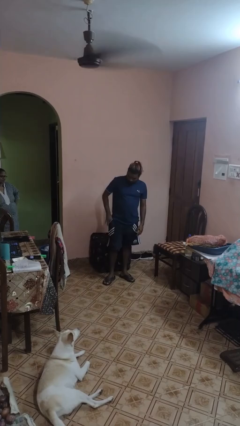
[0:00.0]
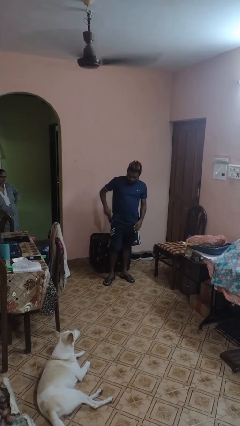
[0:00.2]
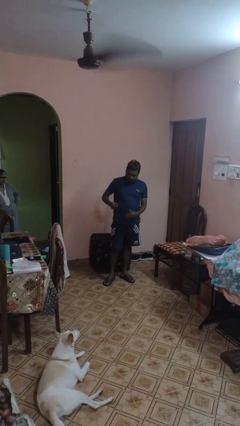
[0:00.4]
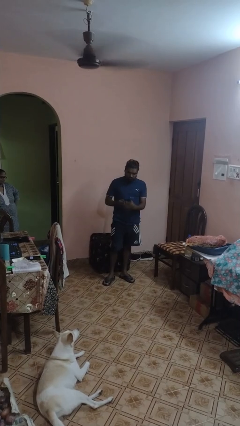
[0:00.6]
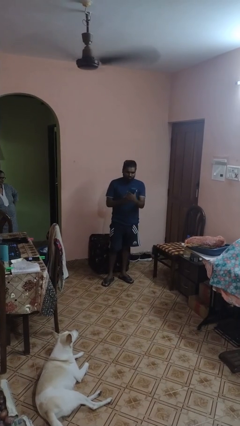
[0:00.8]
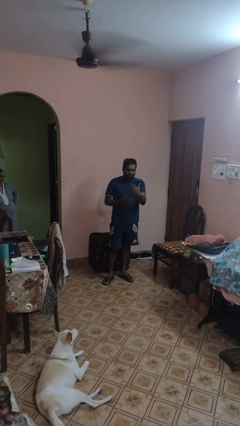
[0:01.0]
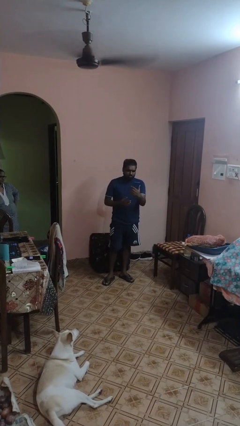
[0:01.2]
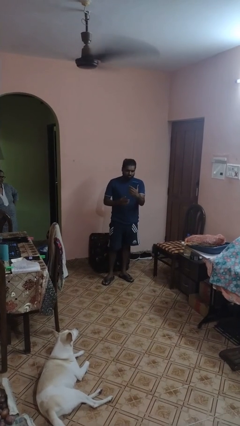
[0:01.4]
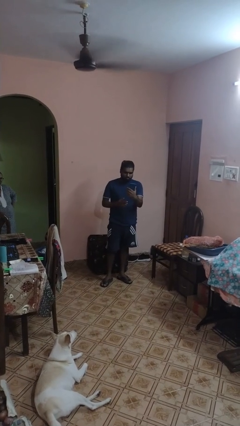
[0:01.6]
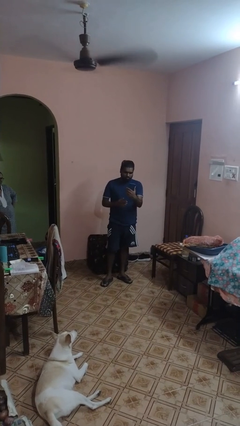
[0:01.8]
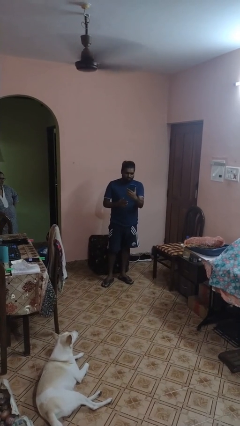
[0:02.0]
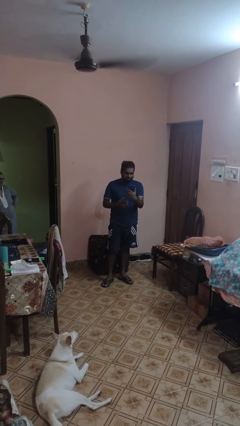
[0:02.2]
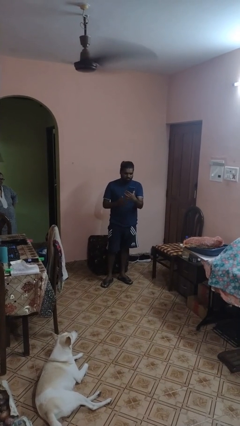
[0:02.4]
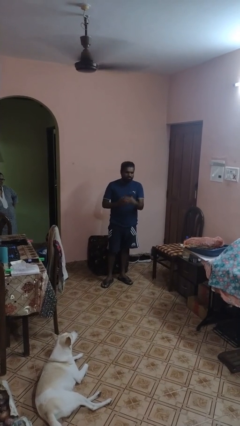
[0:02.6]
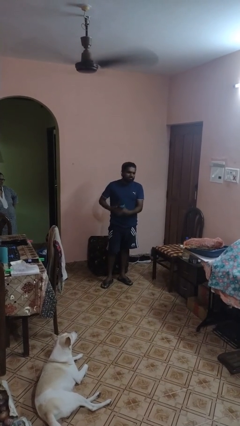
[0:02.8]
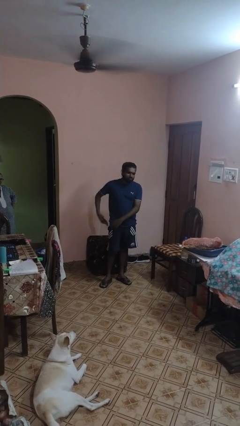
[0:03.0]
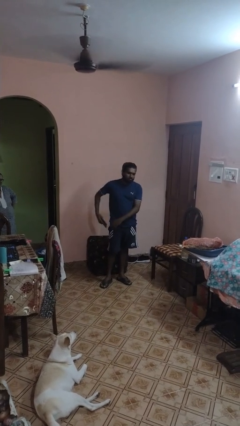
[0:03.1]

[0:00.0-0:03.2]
person takes phone from pocket

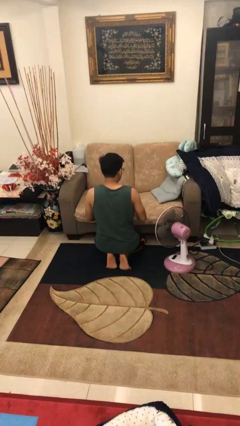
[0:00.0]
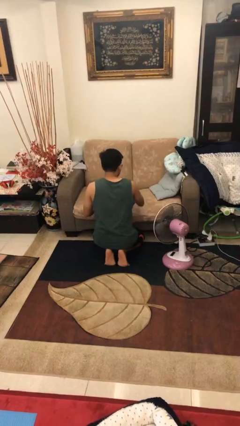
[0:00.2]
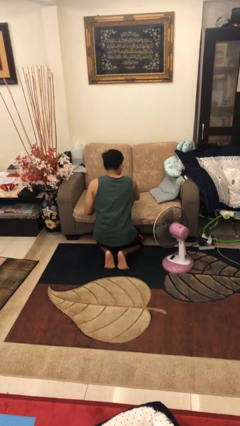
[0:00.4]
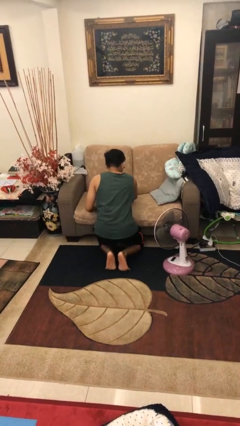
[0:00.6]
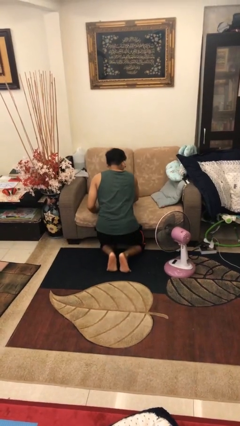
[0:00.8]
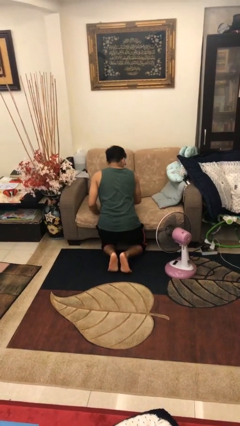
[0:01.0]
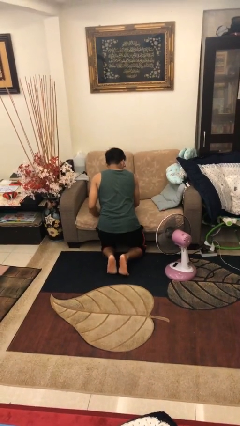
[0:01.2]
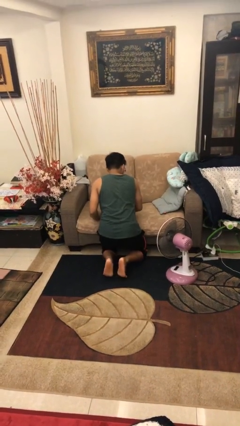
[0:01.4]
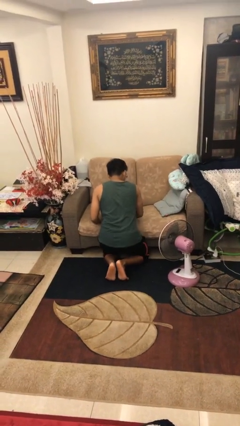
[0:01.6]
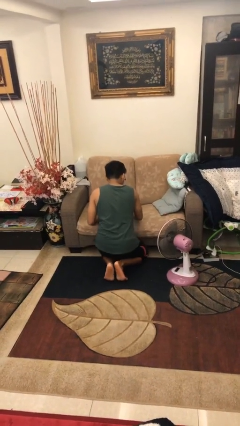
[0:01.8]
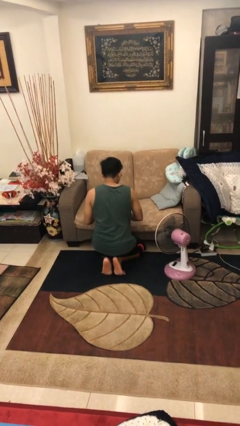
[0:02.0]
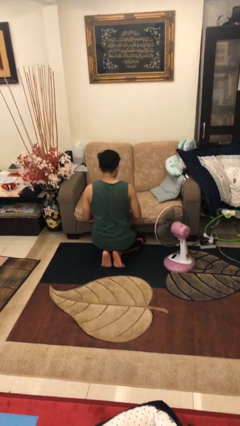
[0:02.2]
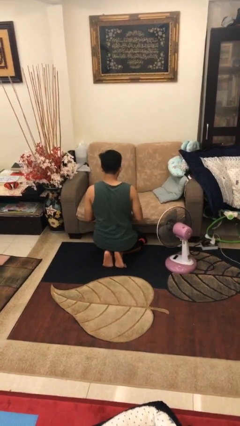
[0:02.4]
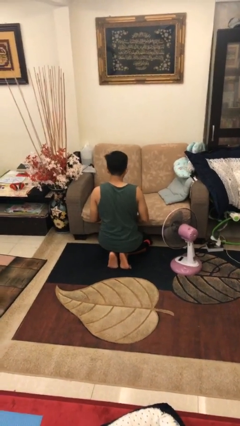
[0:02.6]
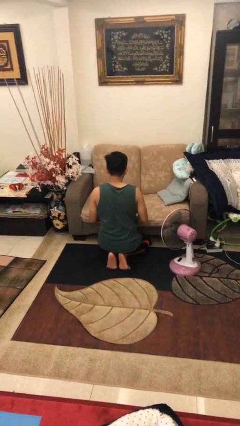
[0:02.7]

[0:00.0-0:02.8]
person searches in couch

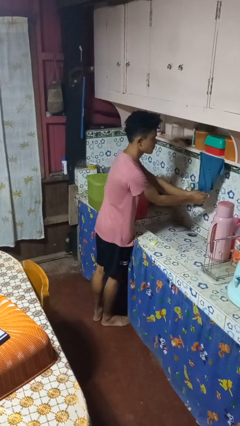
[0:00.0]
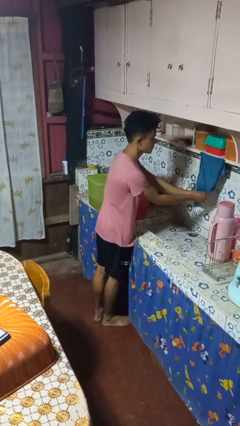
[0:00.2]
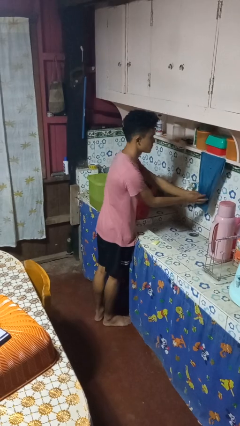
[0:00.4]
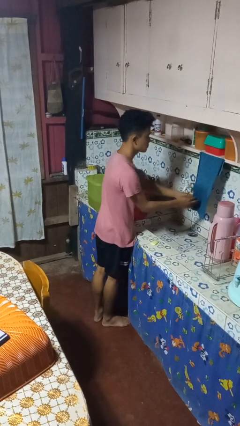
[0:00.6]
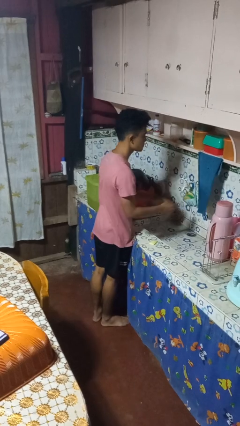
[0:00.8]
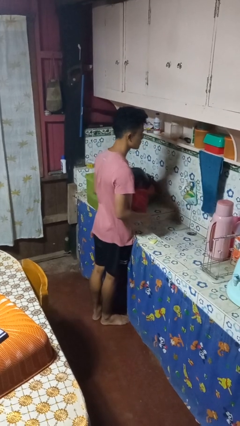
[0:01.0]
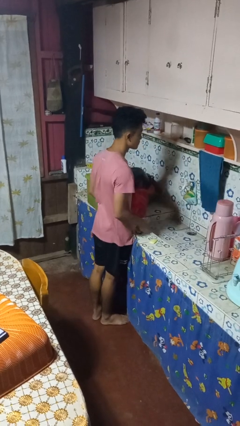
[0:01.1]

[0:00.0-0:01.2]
person dries hands with towel

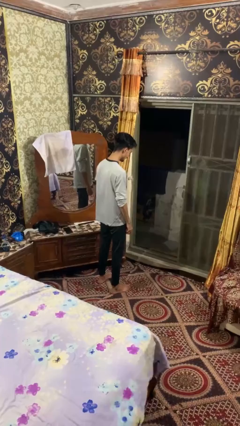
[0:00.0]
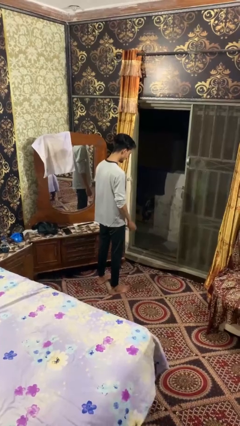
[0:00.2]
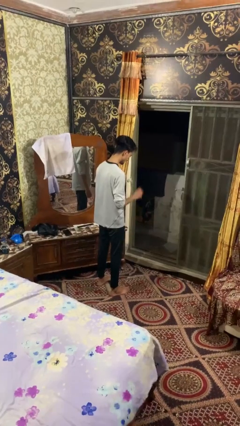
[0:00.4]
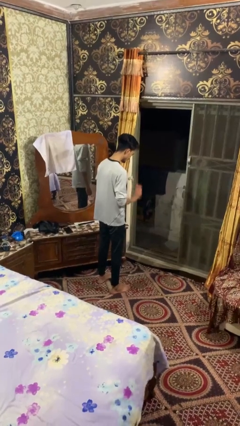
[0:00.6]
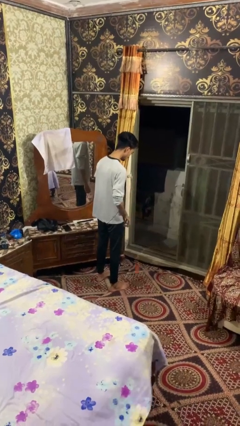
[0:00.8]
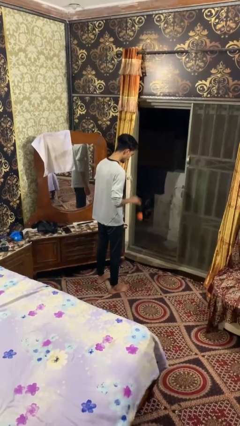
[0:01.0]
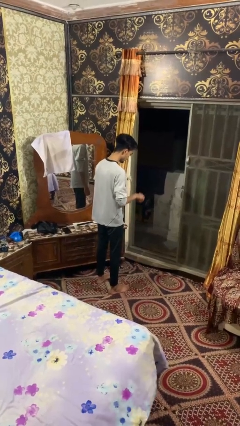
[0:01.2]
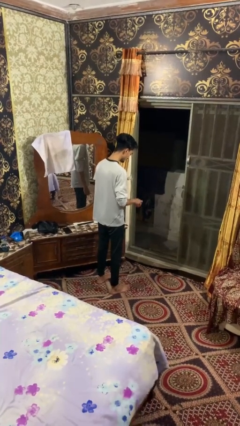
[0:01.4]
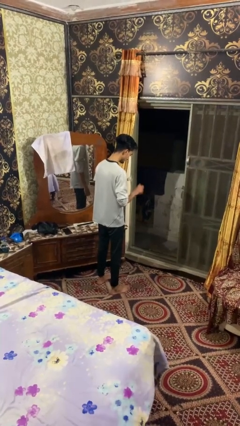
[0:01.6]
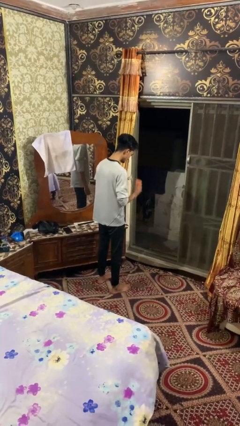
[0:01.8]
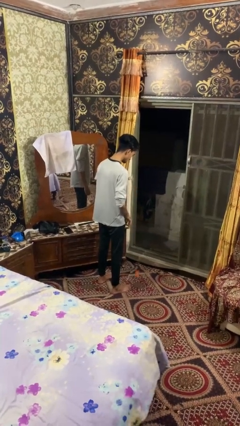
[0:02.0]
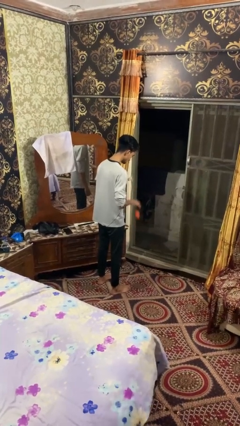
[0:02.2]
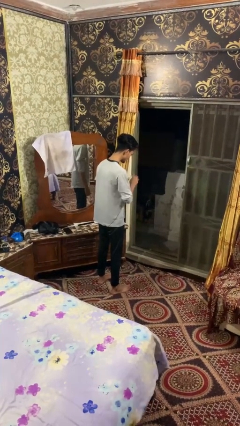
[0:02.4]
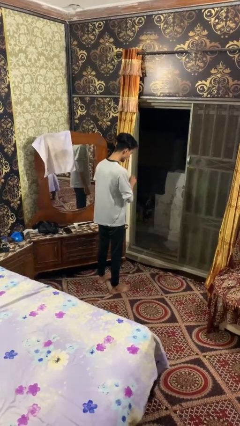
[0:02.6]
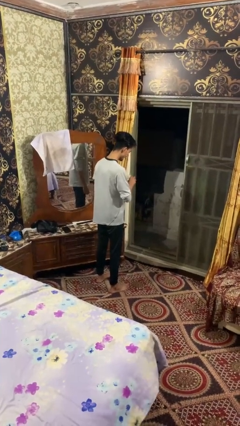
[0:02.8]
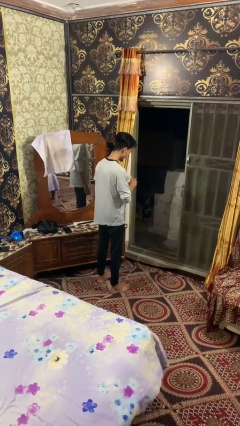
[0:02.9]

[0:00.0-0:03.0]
person bounces ball on floor

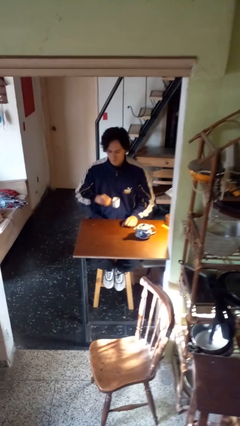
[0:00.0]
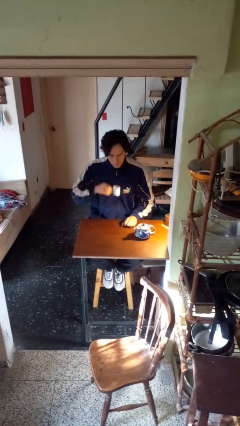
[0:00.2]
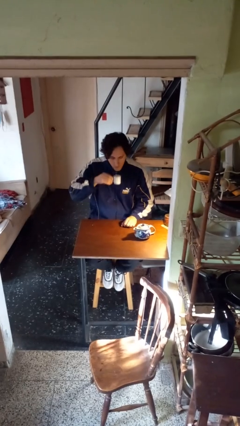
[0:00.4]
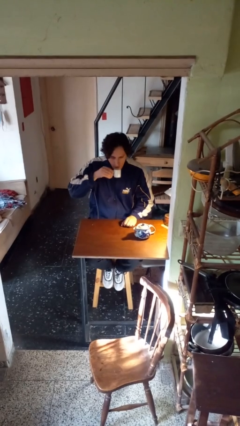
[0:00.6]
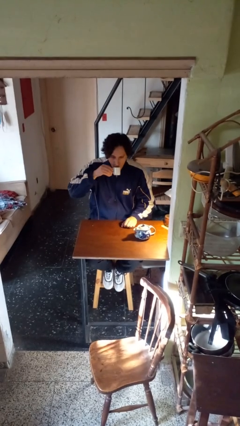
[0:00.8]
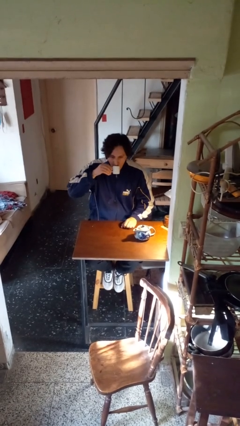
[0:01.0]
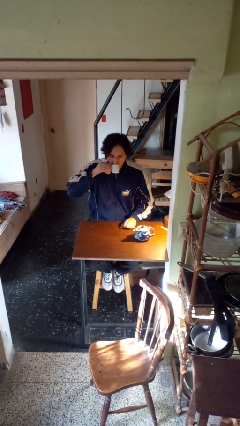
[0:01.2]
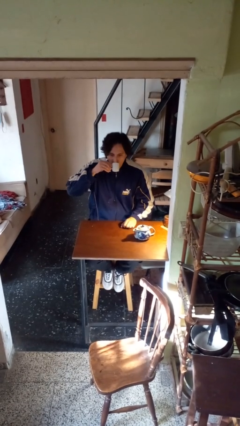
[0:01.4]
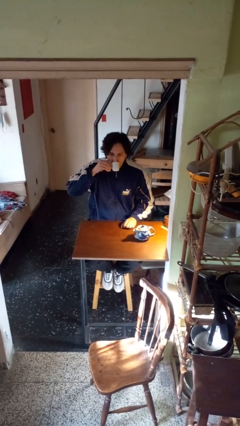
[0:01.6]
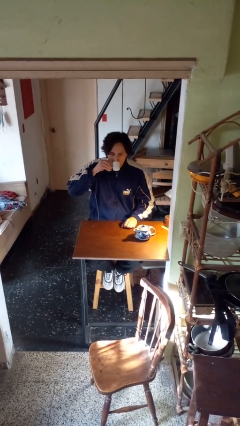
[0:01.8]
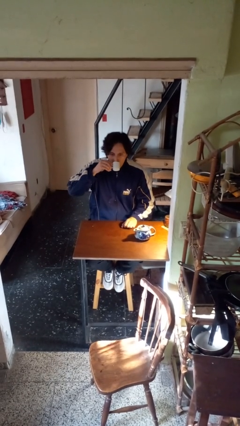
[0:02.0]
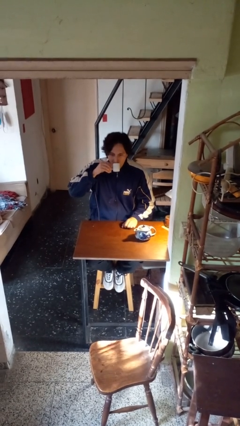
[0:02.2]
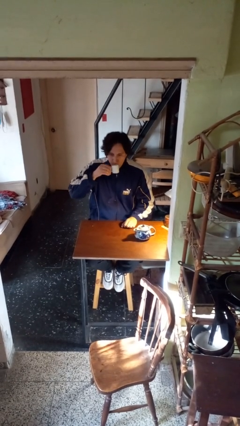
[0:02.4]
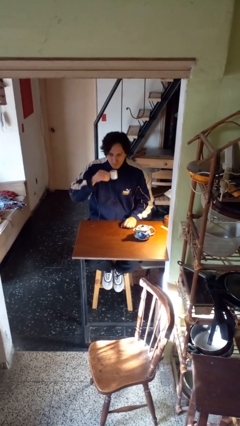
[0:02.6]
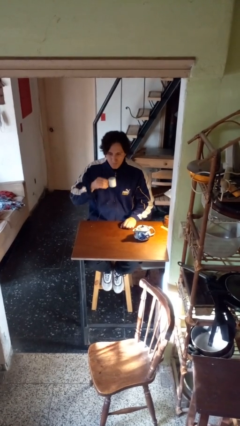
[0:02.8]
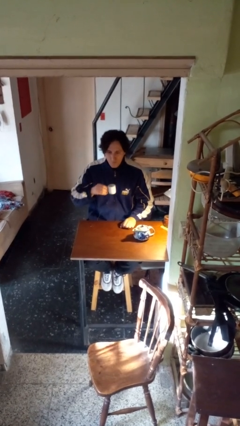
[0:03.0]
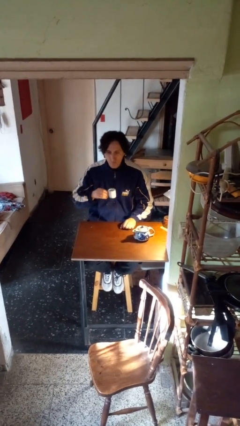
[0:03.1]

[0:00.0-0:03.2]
person drinks from mug

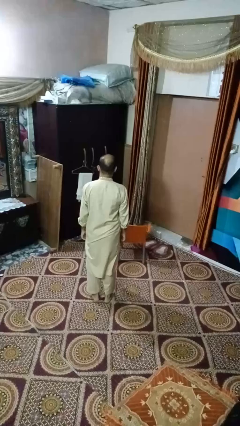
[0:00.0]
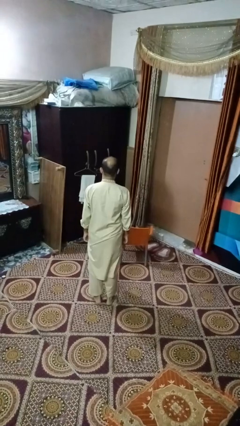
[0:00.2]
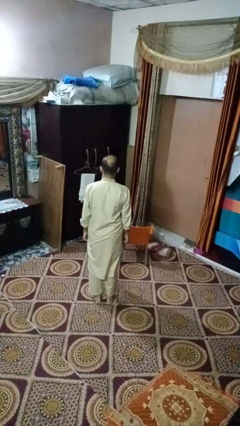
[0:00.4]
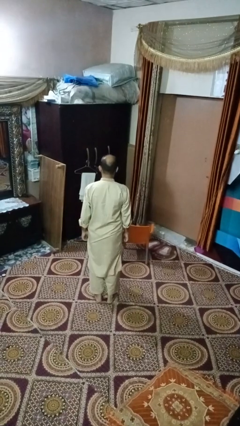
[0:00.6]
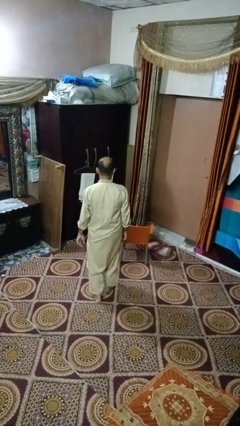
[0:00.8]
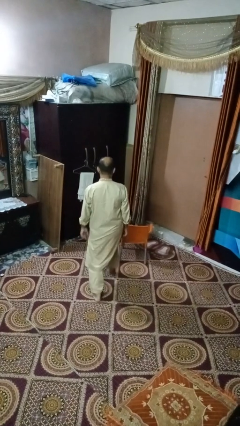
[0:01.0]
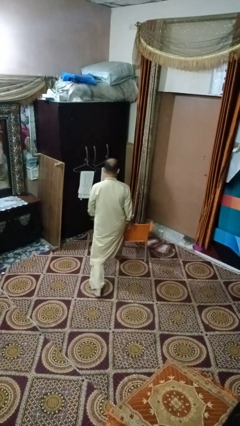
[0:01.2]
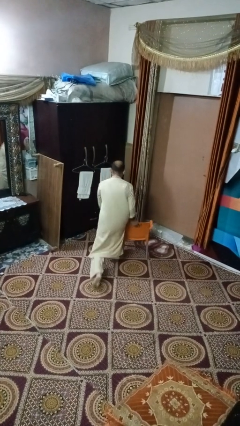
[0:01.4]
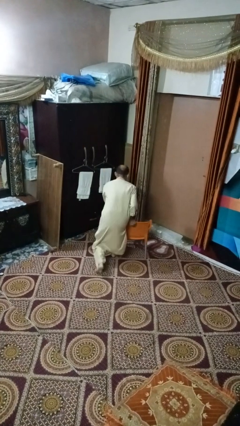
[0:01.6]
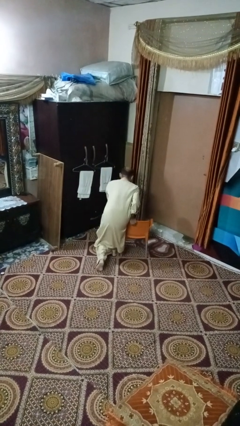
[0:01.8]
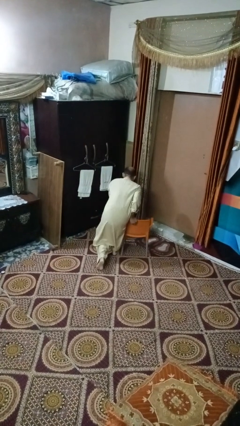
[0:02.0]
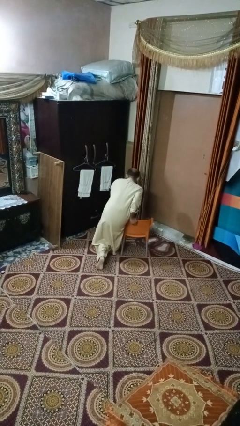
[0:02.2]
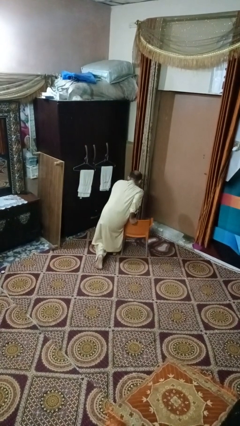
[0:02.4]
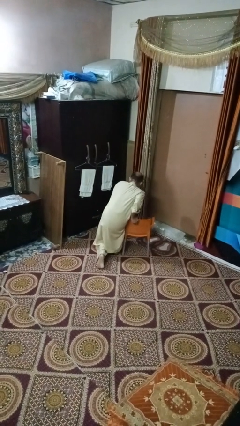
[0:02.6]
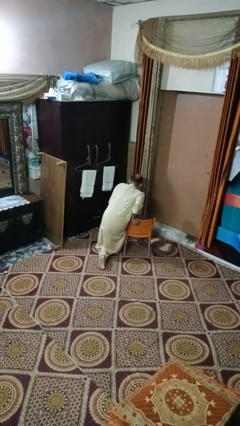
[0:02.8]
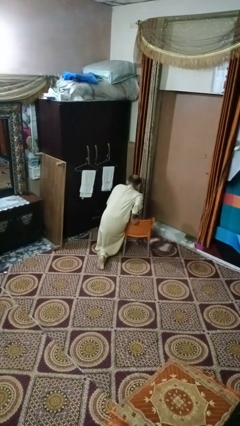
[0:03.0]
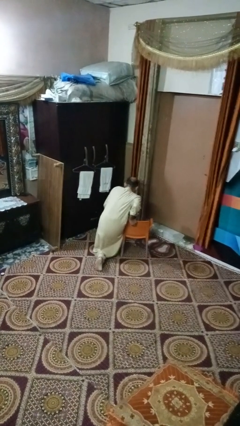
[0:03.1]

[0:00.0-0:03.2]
person trips on object on floor

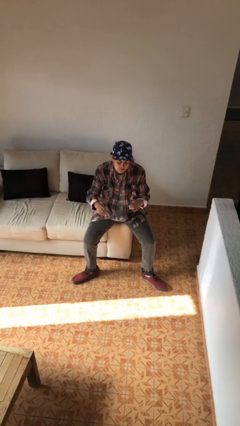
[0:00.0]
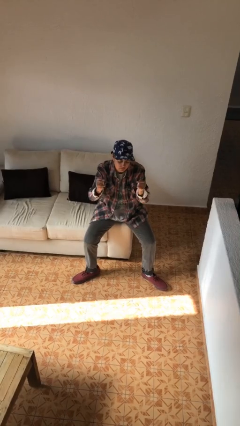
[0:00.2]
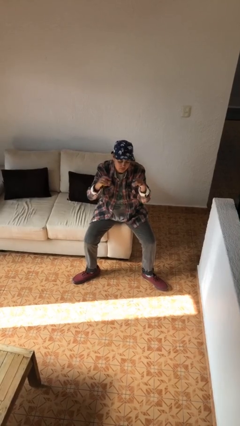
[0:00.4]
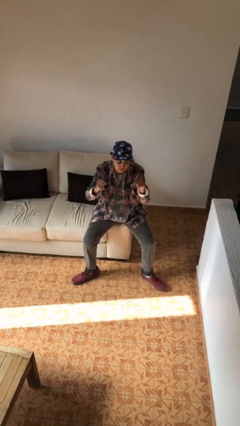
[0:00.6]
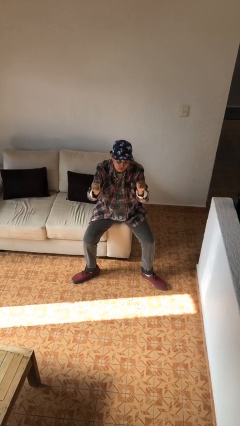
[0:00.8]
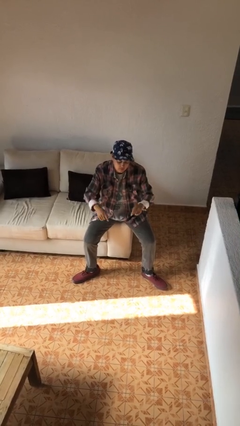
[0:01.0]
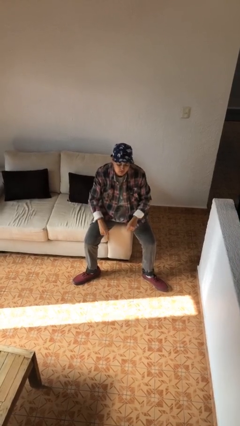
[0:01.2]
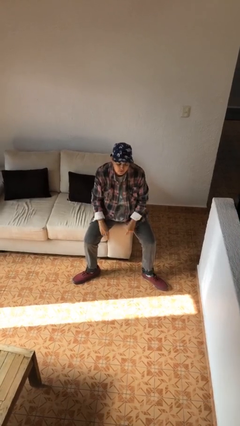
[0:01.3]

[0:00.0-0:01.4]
person snaps fingers
